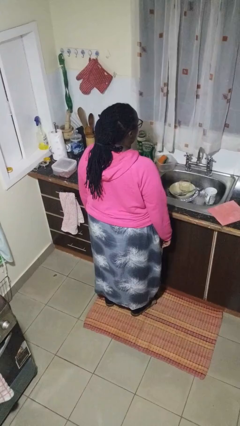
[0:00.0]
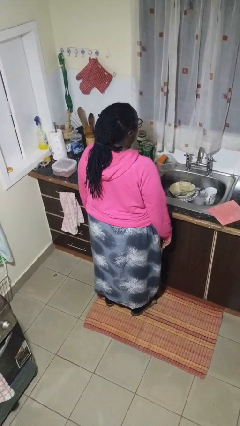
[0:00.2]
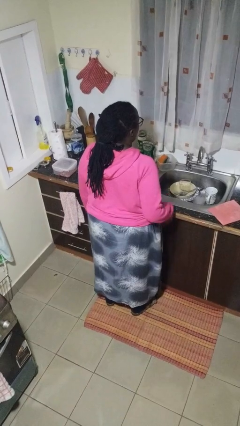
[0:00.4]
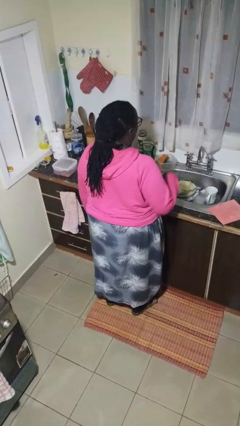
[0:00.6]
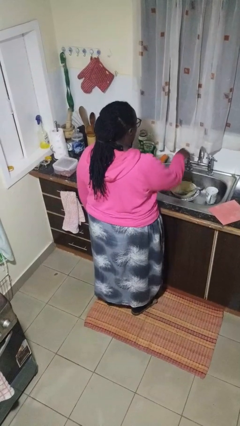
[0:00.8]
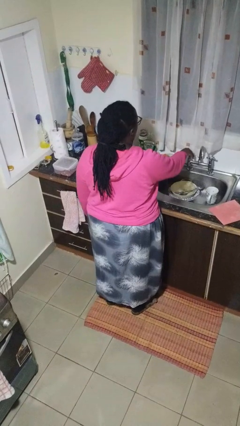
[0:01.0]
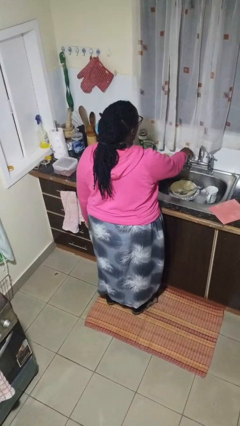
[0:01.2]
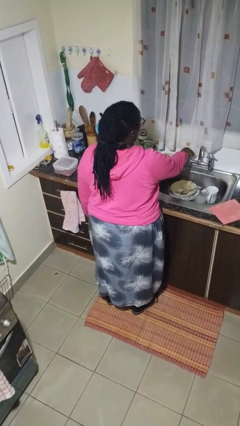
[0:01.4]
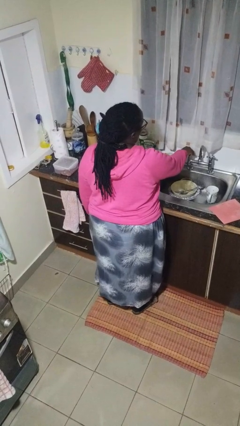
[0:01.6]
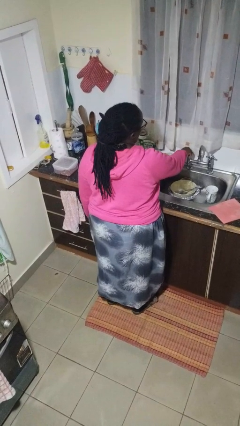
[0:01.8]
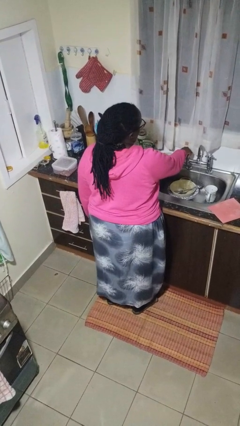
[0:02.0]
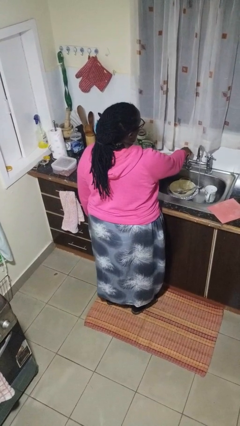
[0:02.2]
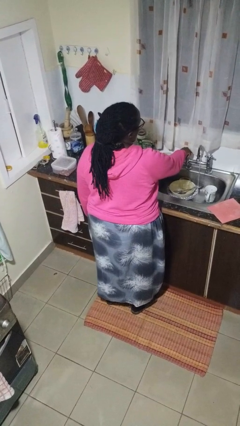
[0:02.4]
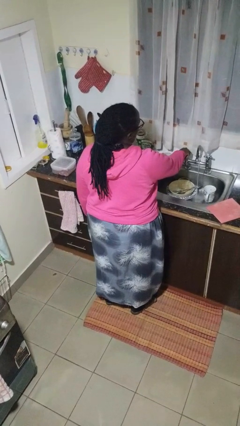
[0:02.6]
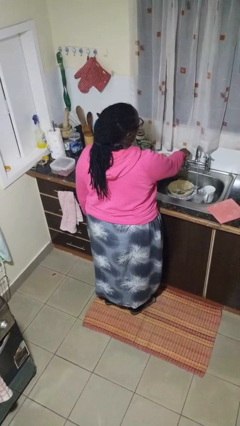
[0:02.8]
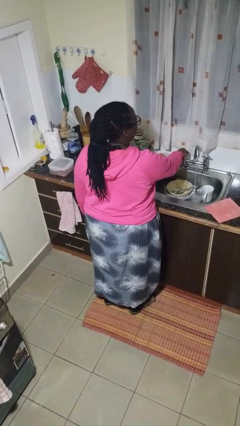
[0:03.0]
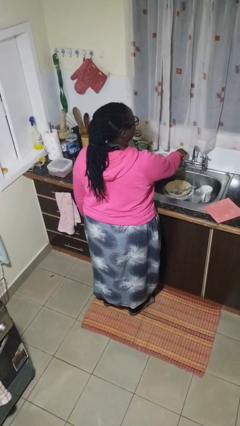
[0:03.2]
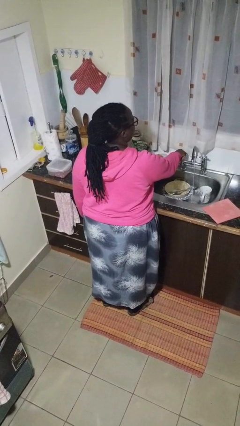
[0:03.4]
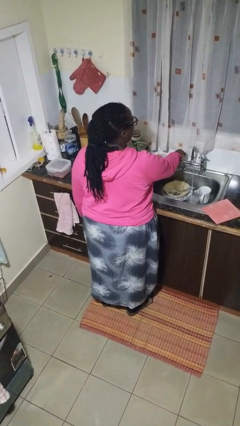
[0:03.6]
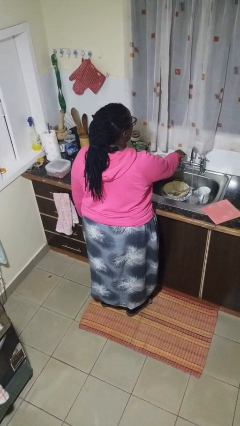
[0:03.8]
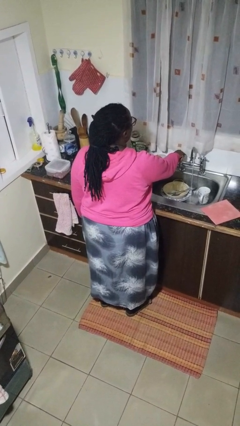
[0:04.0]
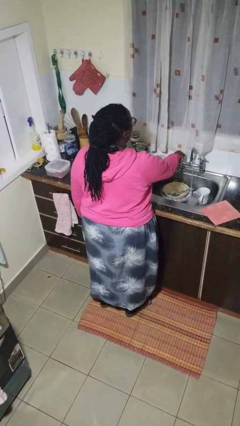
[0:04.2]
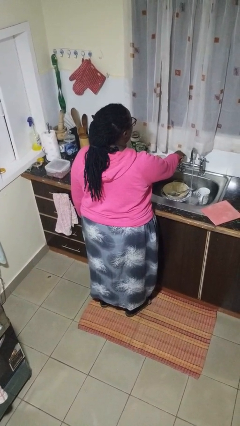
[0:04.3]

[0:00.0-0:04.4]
person turns on faucet

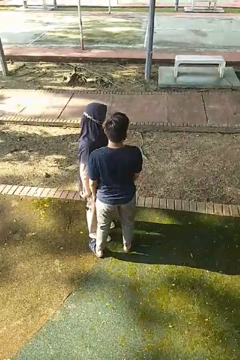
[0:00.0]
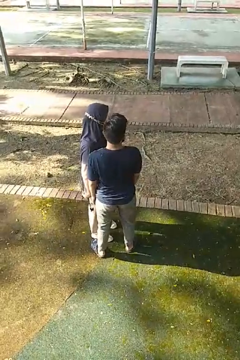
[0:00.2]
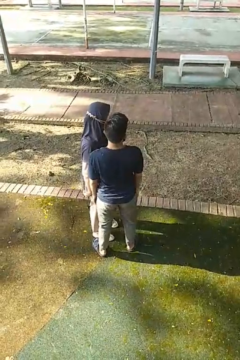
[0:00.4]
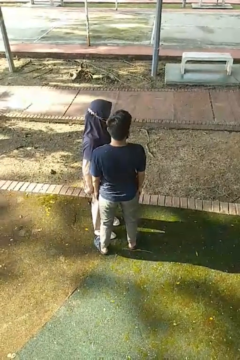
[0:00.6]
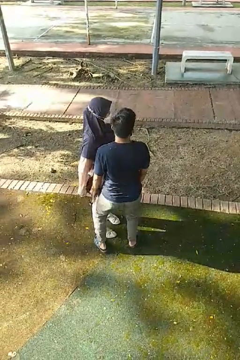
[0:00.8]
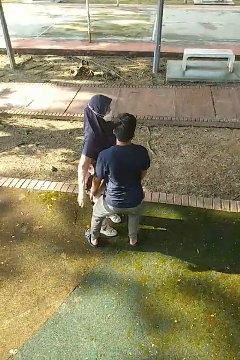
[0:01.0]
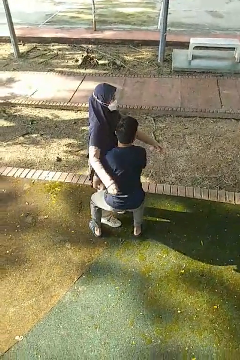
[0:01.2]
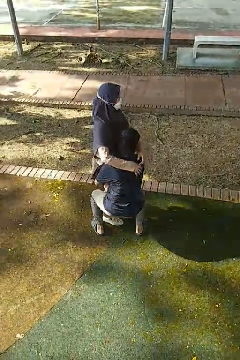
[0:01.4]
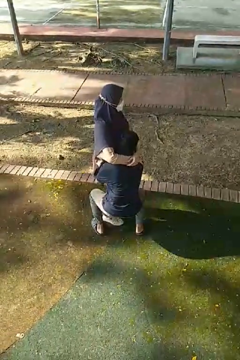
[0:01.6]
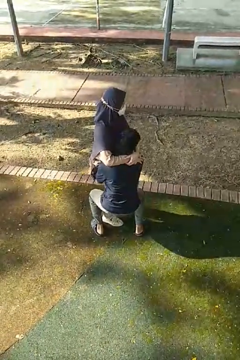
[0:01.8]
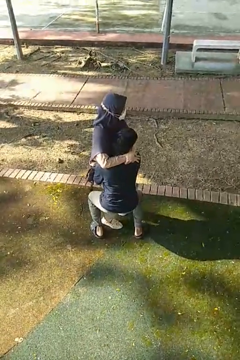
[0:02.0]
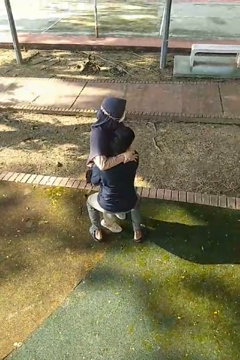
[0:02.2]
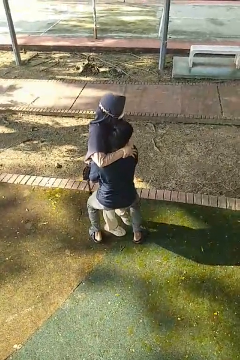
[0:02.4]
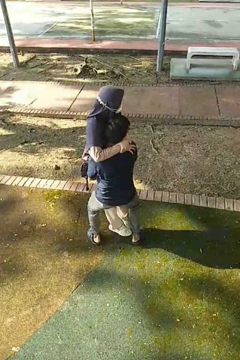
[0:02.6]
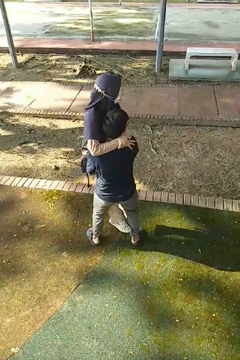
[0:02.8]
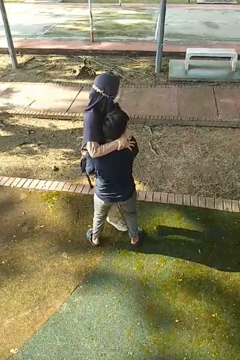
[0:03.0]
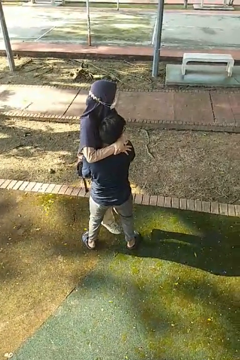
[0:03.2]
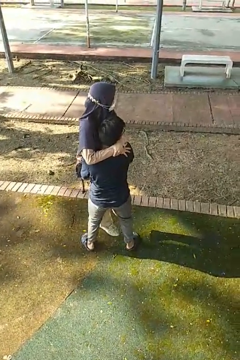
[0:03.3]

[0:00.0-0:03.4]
person picks up person

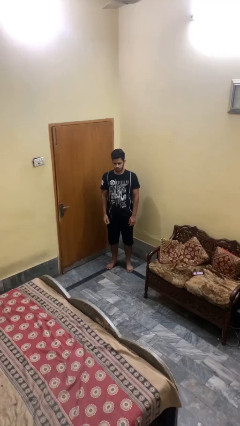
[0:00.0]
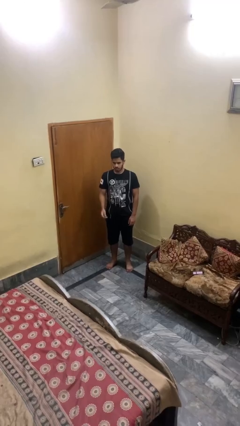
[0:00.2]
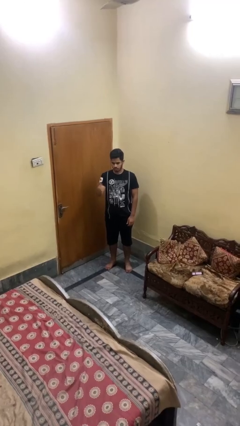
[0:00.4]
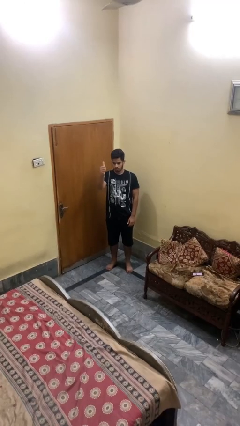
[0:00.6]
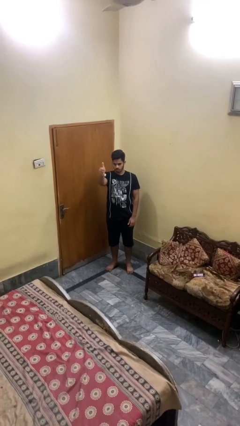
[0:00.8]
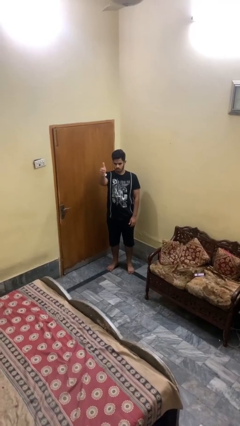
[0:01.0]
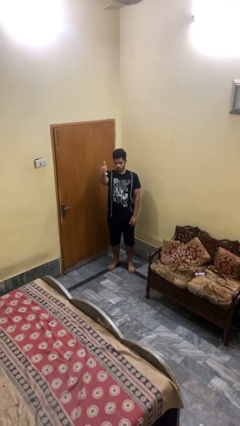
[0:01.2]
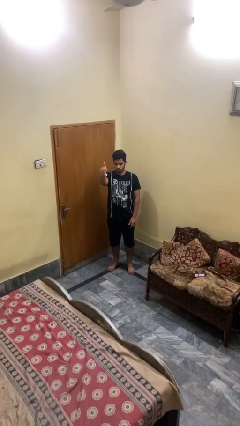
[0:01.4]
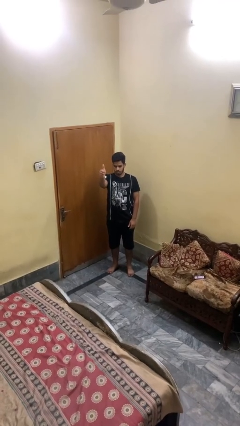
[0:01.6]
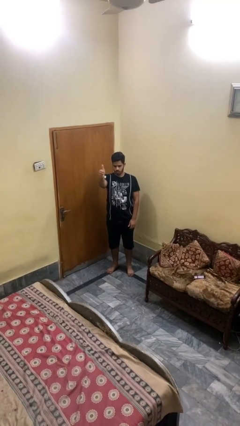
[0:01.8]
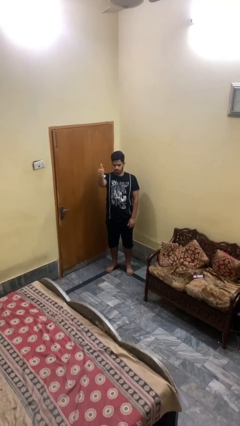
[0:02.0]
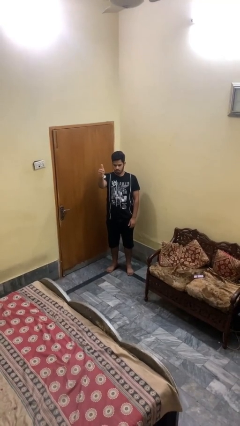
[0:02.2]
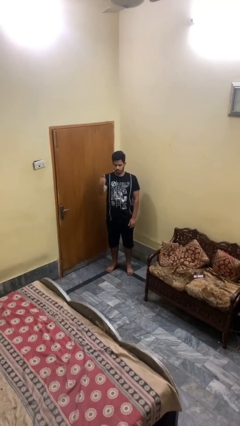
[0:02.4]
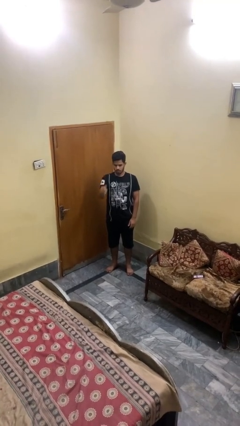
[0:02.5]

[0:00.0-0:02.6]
person gestures thumbs up

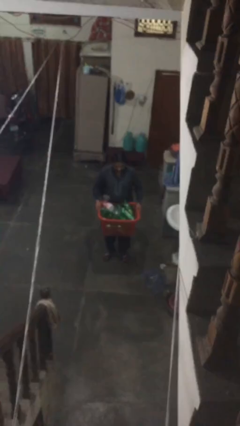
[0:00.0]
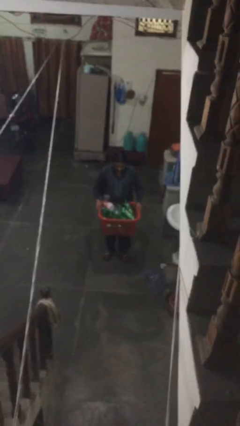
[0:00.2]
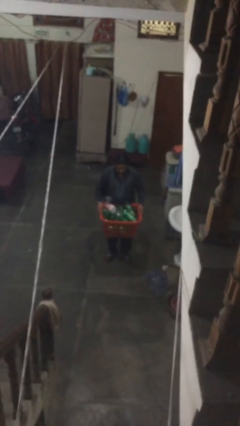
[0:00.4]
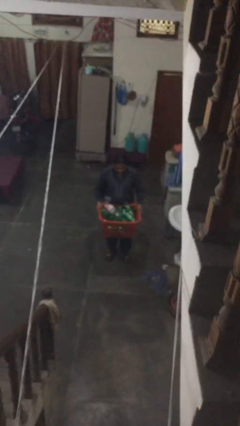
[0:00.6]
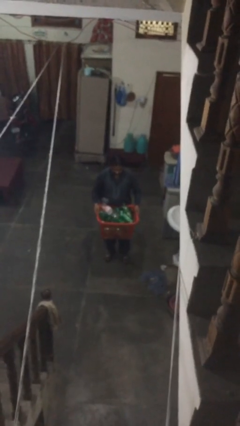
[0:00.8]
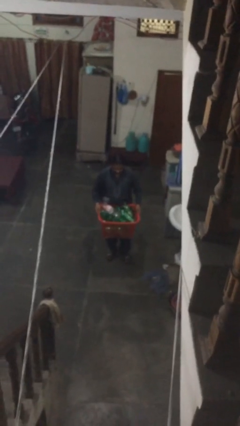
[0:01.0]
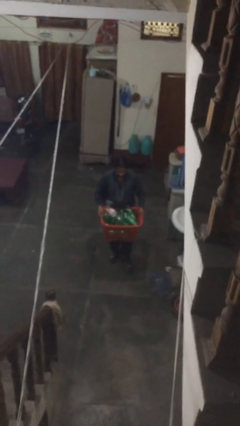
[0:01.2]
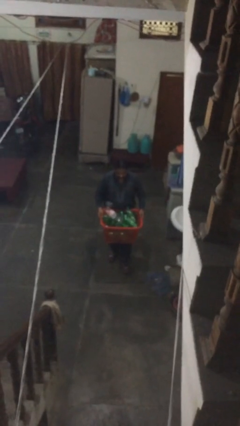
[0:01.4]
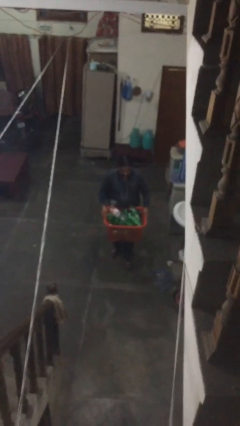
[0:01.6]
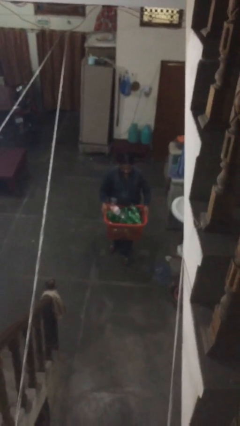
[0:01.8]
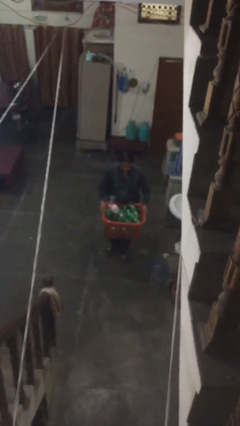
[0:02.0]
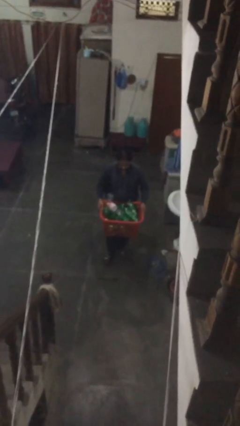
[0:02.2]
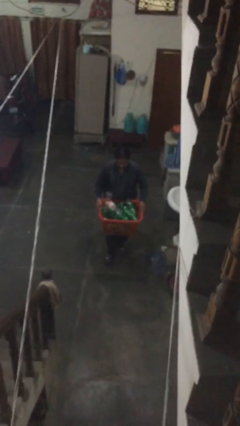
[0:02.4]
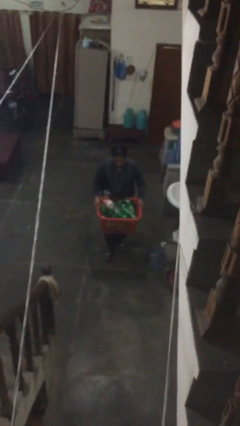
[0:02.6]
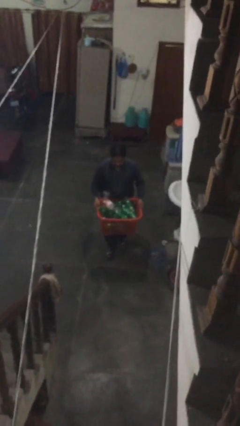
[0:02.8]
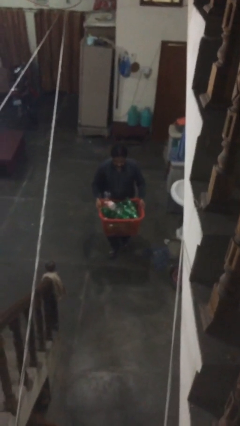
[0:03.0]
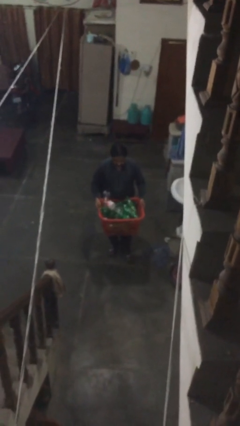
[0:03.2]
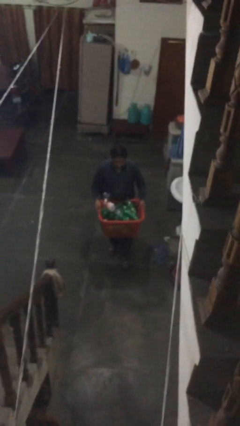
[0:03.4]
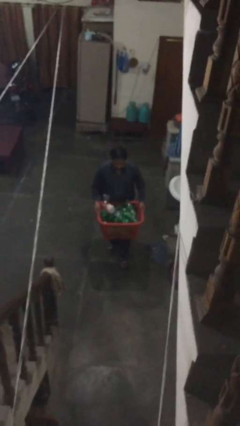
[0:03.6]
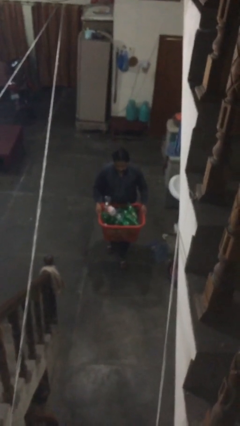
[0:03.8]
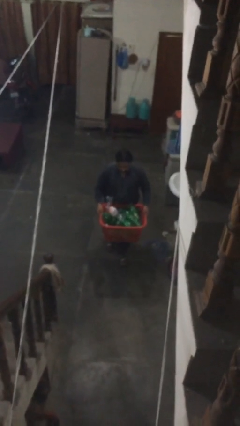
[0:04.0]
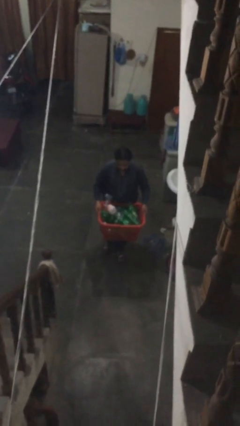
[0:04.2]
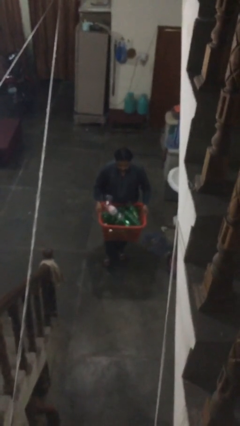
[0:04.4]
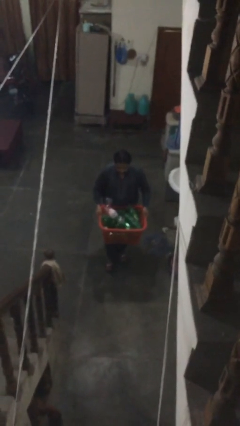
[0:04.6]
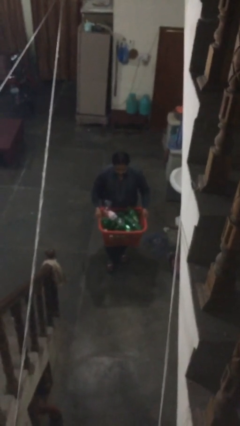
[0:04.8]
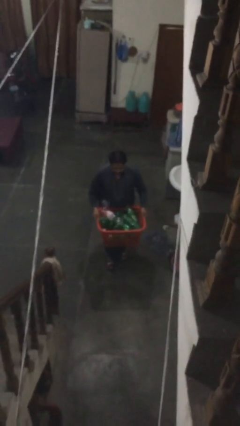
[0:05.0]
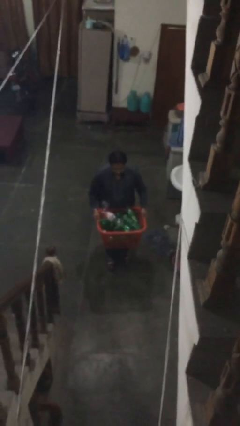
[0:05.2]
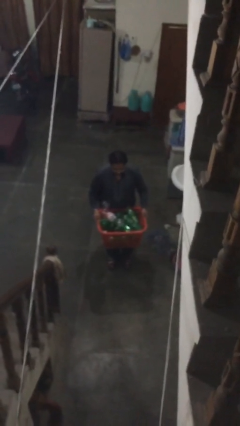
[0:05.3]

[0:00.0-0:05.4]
person carries heavy object

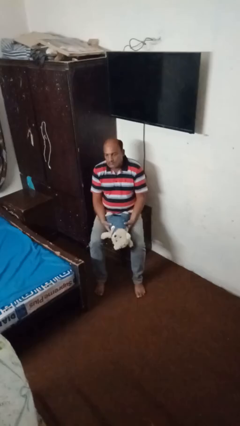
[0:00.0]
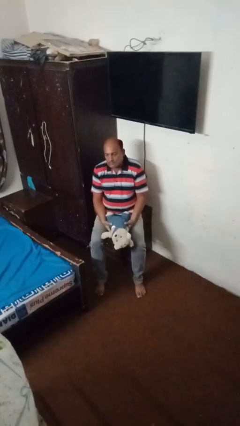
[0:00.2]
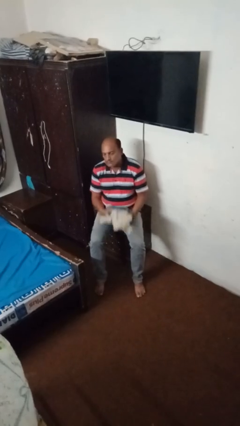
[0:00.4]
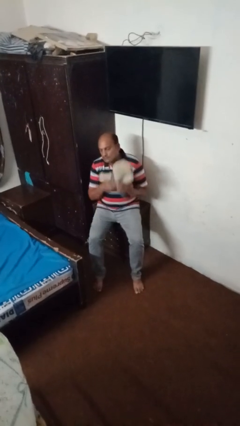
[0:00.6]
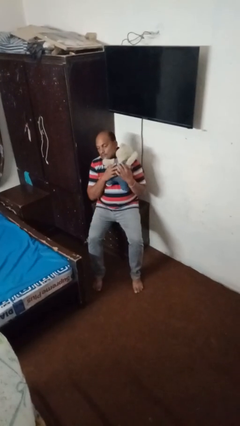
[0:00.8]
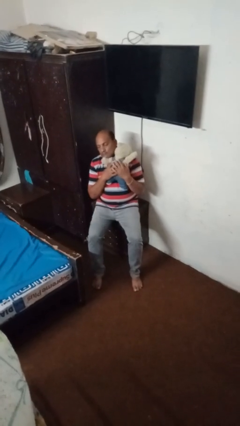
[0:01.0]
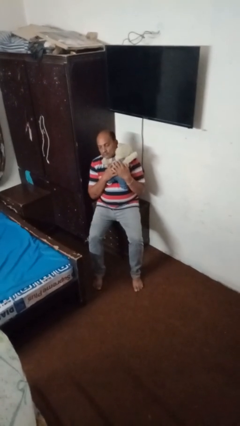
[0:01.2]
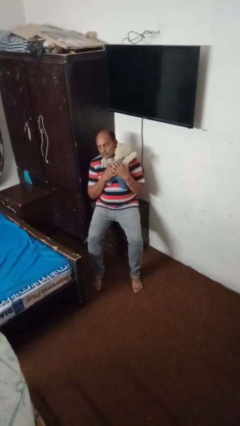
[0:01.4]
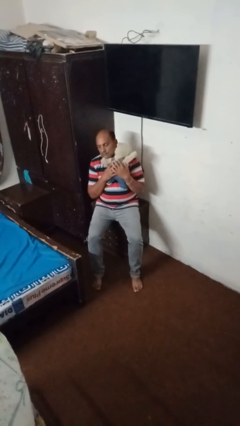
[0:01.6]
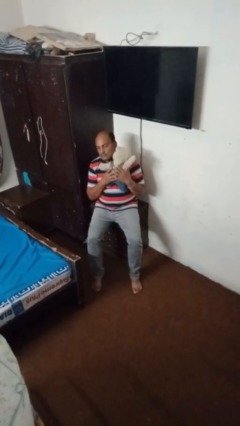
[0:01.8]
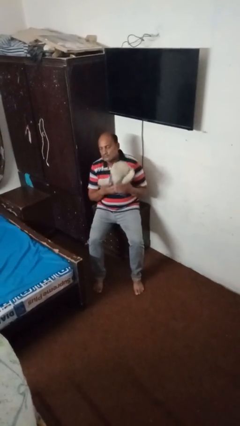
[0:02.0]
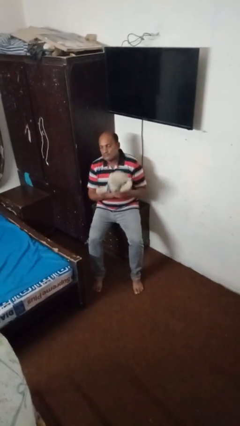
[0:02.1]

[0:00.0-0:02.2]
person hugs stuffed animal

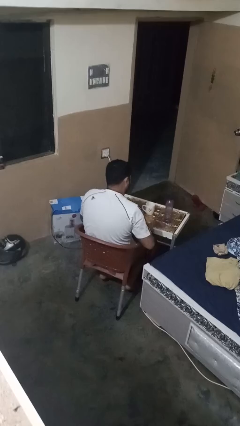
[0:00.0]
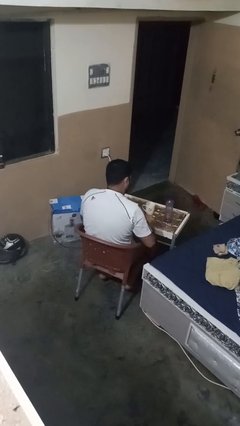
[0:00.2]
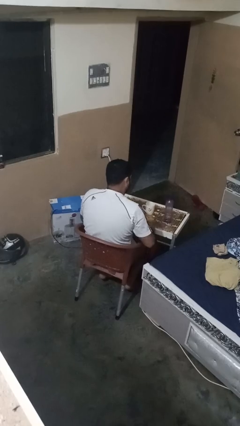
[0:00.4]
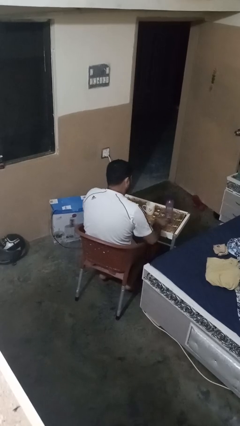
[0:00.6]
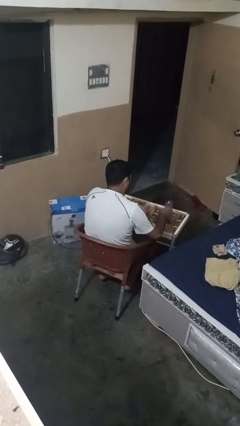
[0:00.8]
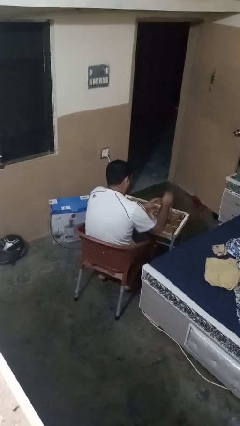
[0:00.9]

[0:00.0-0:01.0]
person screws lid to bottle
